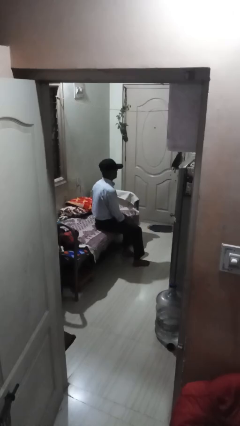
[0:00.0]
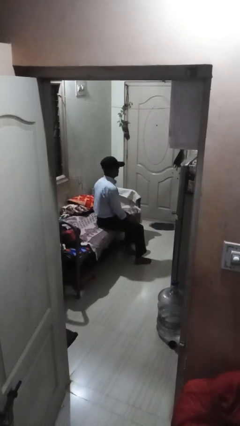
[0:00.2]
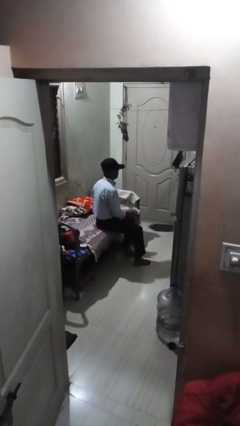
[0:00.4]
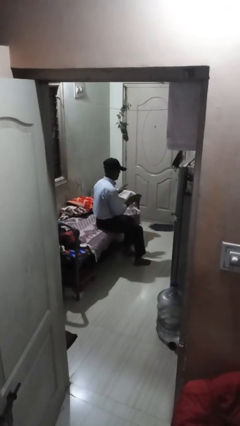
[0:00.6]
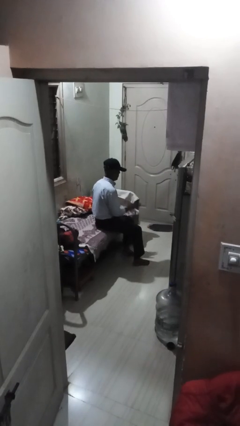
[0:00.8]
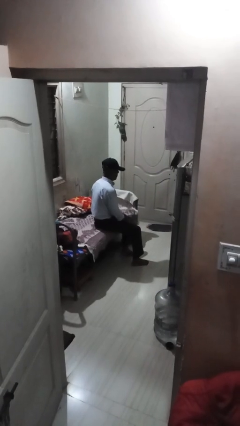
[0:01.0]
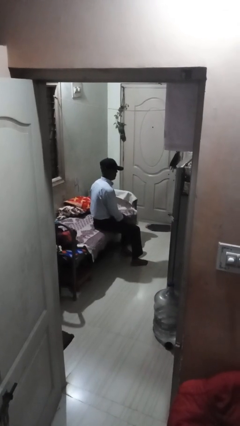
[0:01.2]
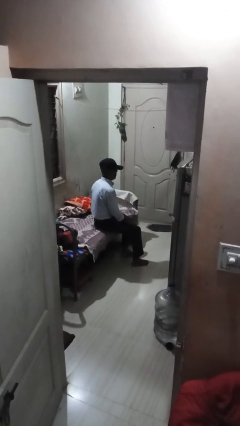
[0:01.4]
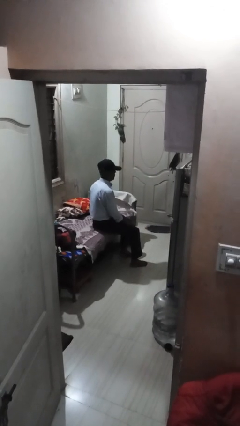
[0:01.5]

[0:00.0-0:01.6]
person slaps hands on thighs

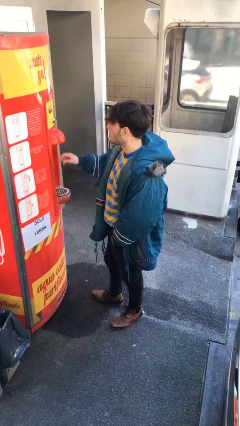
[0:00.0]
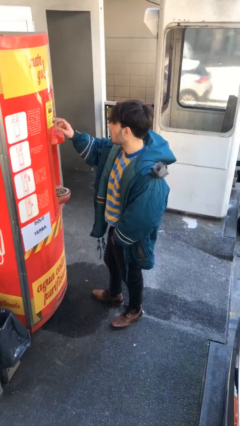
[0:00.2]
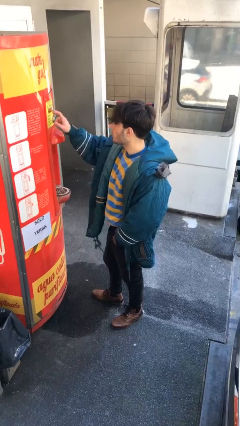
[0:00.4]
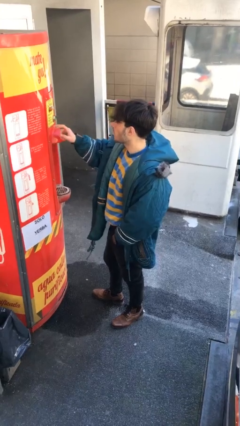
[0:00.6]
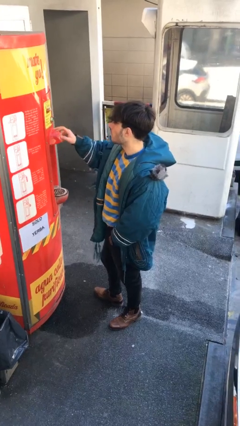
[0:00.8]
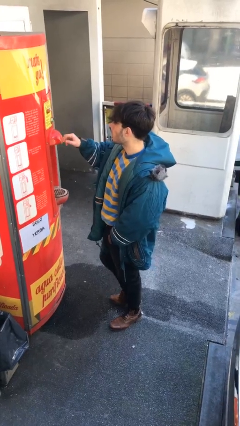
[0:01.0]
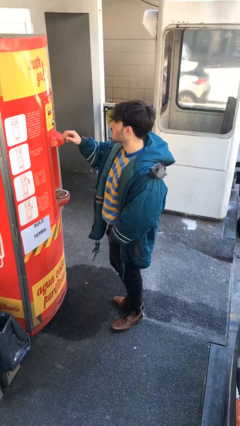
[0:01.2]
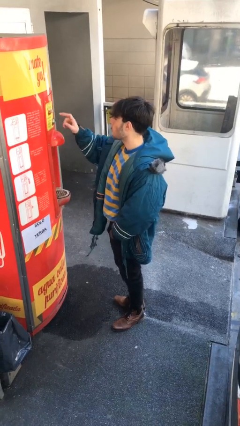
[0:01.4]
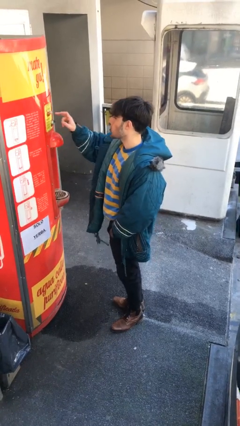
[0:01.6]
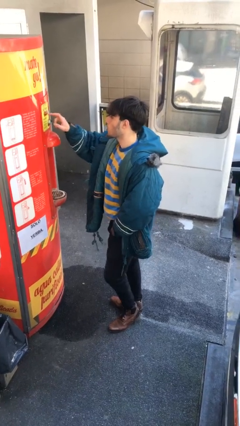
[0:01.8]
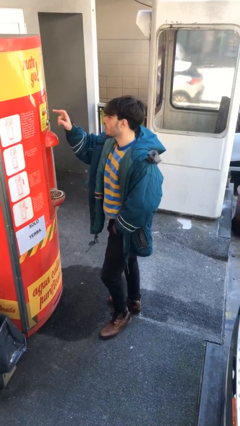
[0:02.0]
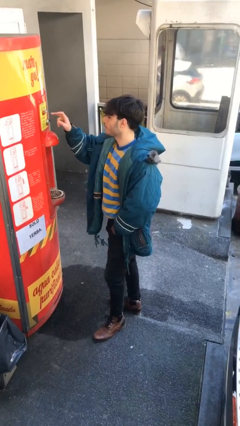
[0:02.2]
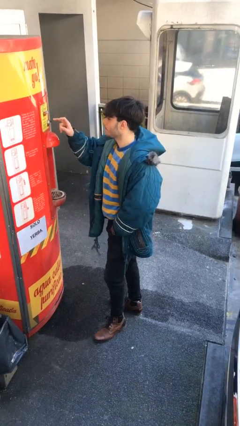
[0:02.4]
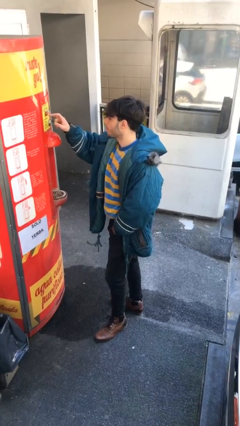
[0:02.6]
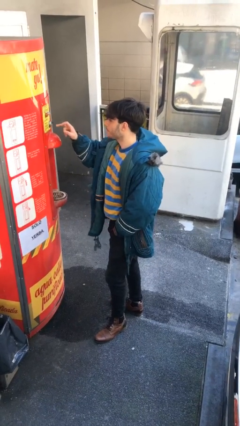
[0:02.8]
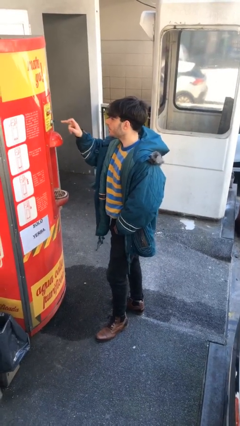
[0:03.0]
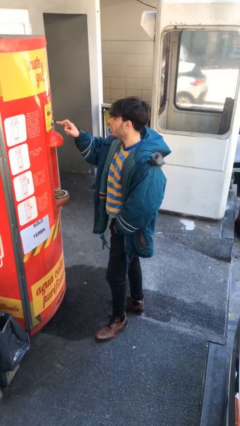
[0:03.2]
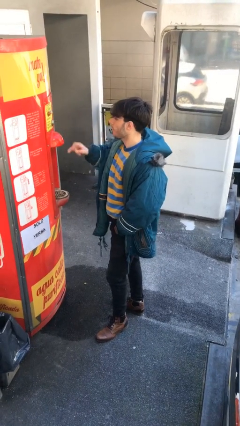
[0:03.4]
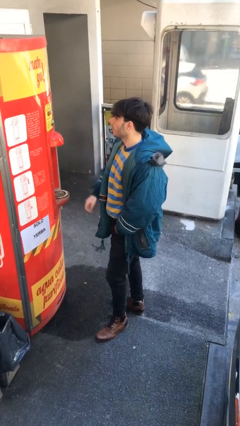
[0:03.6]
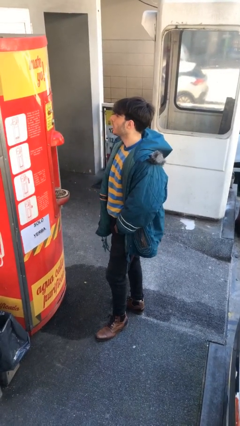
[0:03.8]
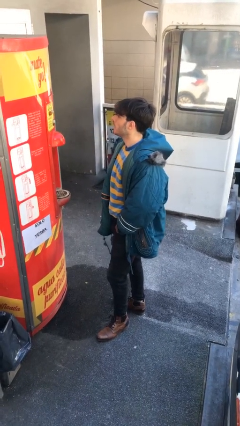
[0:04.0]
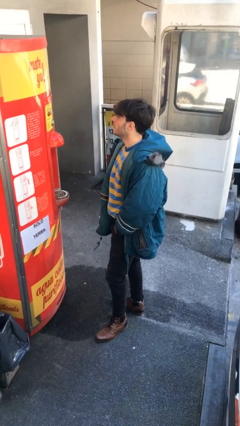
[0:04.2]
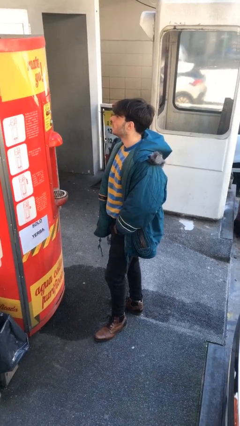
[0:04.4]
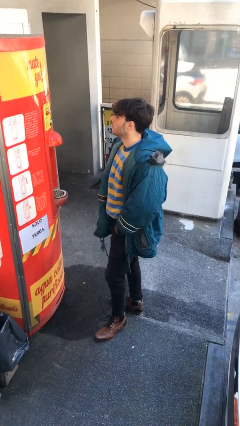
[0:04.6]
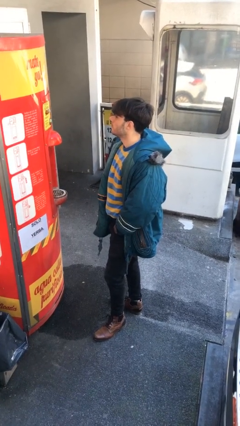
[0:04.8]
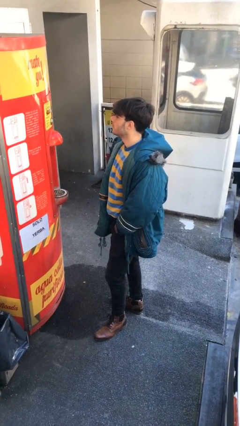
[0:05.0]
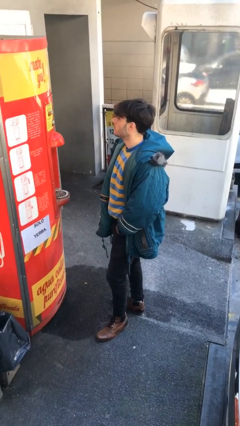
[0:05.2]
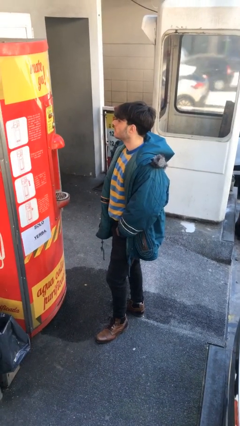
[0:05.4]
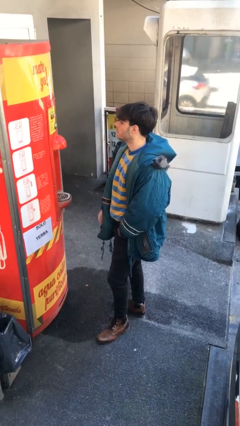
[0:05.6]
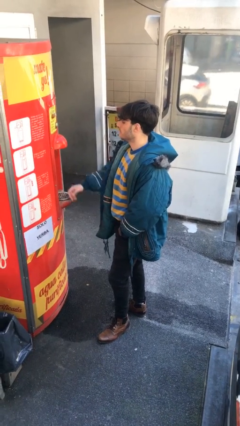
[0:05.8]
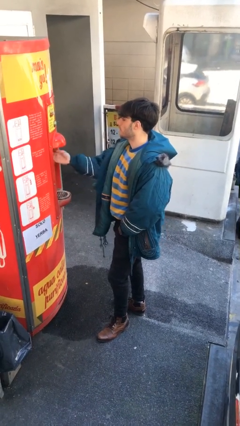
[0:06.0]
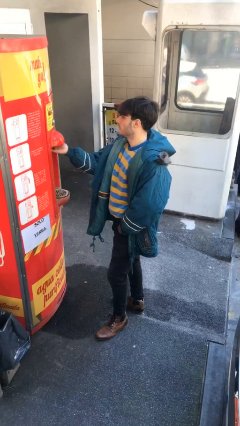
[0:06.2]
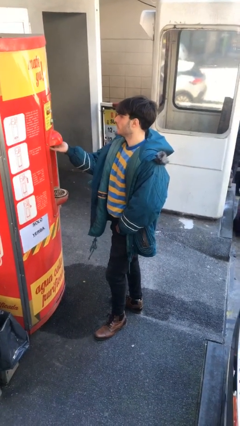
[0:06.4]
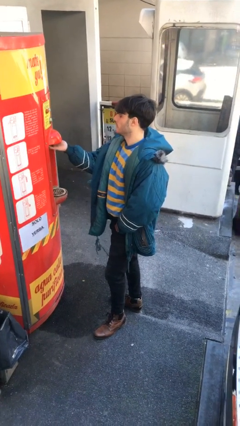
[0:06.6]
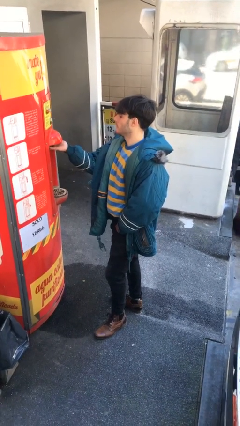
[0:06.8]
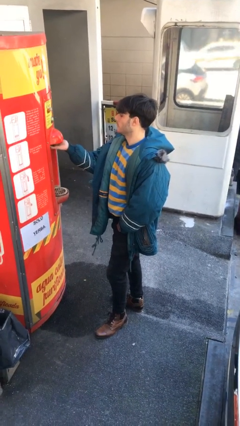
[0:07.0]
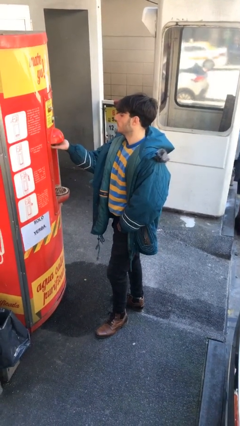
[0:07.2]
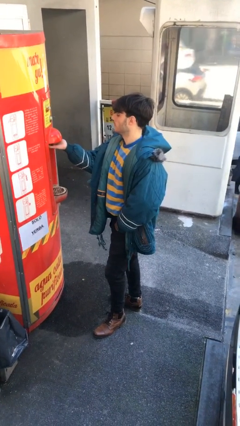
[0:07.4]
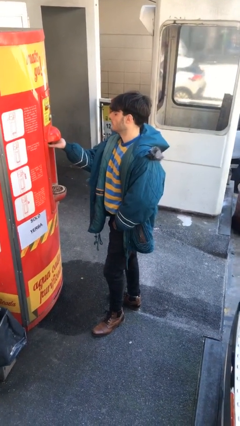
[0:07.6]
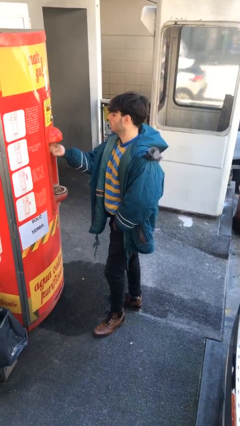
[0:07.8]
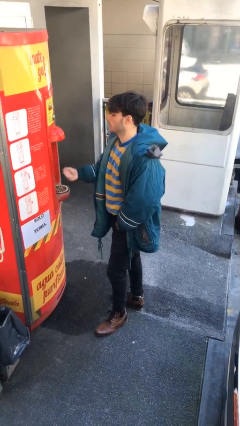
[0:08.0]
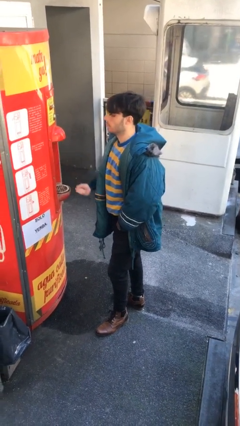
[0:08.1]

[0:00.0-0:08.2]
person purchases from machine

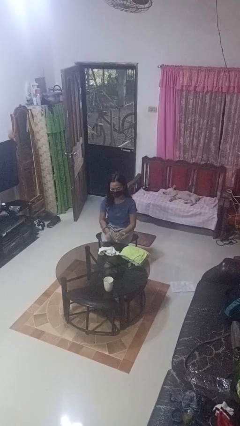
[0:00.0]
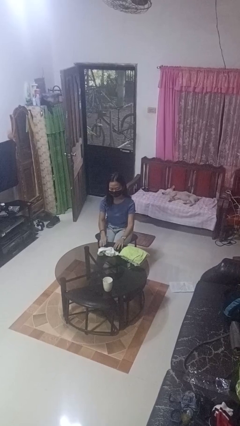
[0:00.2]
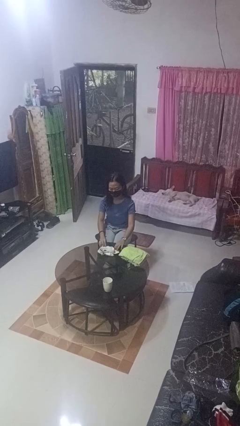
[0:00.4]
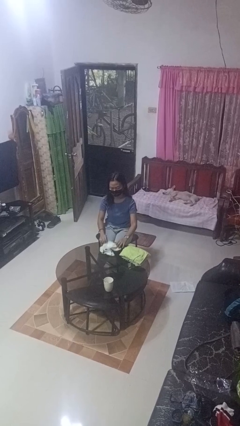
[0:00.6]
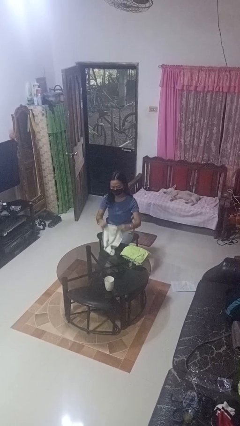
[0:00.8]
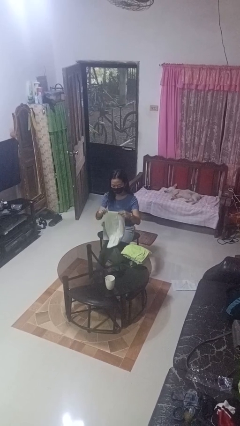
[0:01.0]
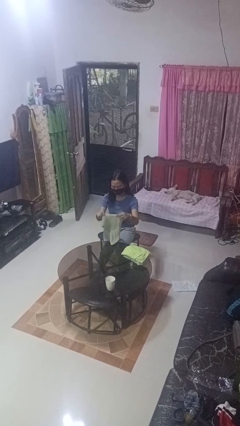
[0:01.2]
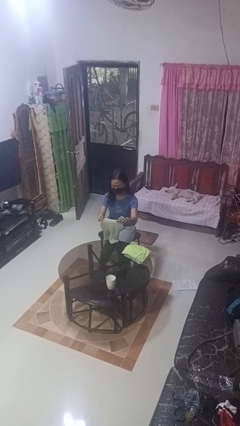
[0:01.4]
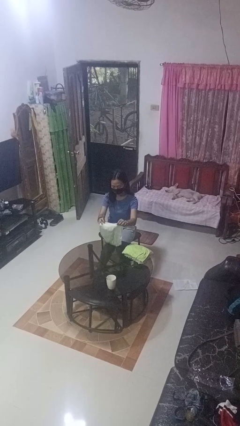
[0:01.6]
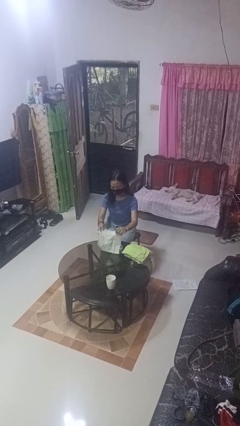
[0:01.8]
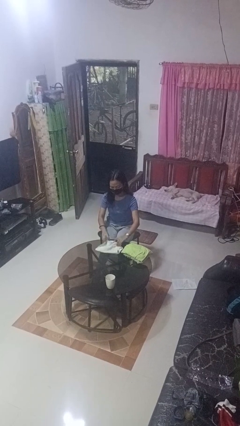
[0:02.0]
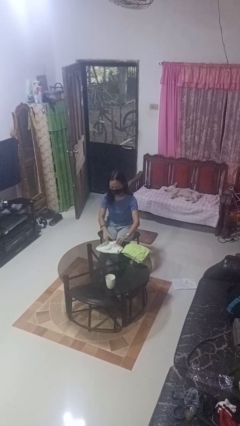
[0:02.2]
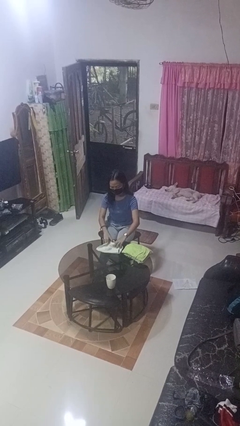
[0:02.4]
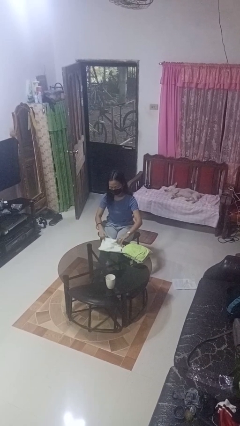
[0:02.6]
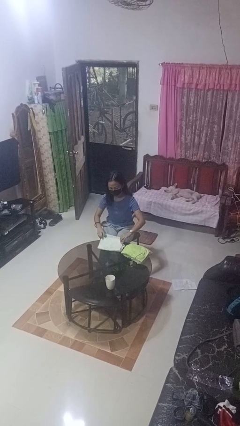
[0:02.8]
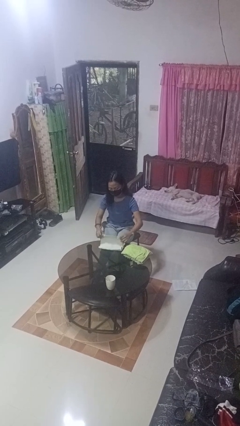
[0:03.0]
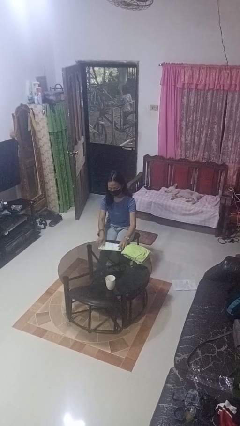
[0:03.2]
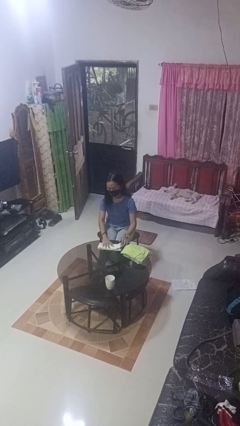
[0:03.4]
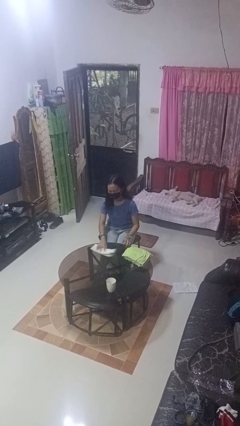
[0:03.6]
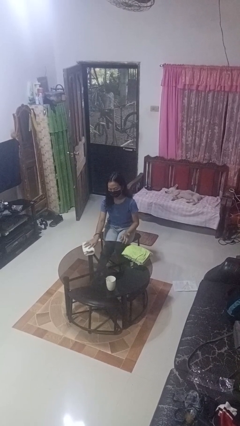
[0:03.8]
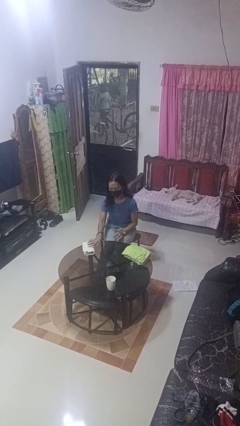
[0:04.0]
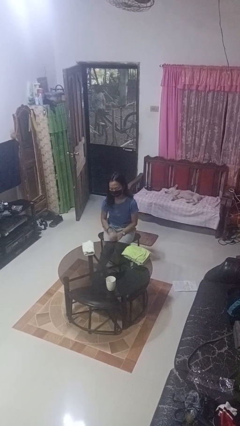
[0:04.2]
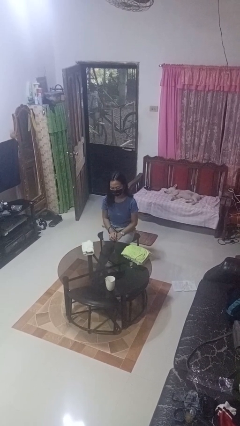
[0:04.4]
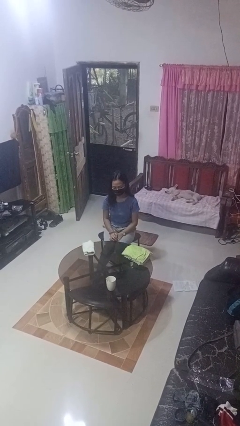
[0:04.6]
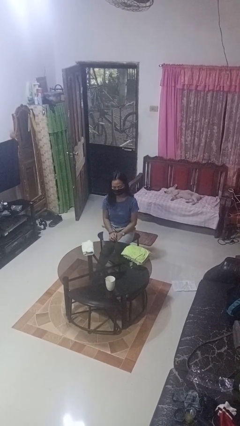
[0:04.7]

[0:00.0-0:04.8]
person folds towel

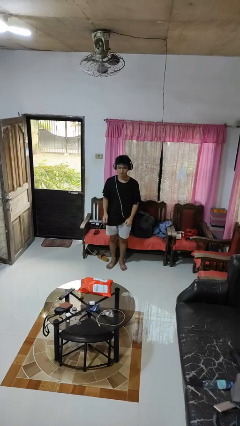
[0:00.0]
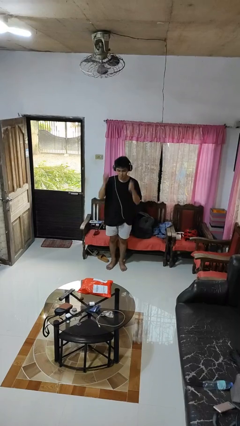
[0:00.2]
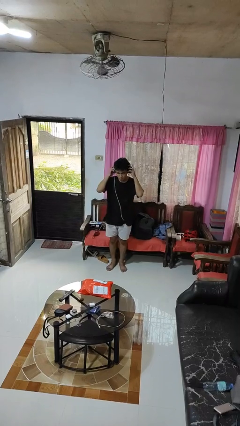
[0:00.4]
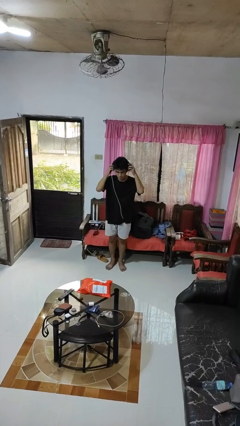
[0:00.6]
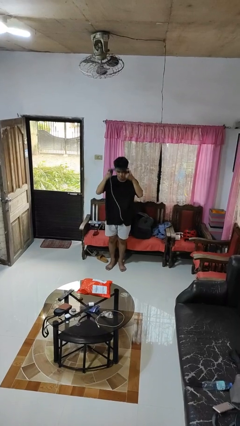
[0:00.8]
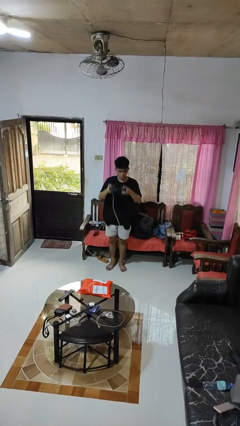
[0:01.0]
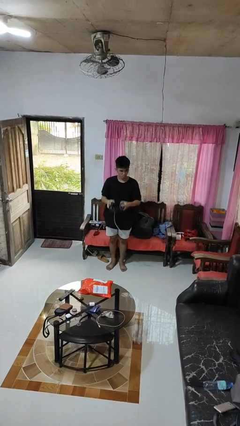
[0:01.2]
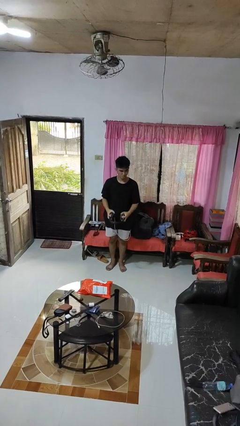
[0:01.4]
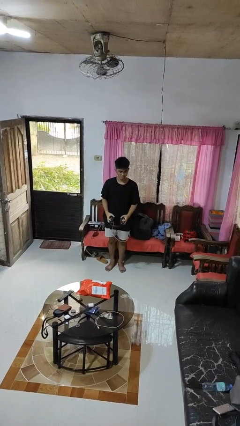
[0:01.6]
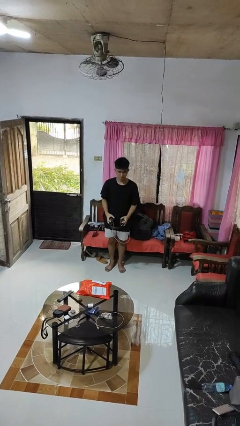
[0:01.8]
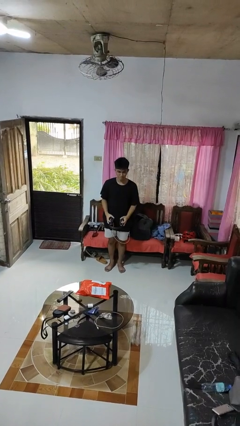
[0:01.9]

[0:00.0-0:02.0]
person takes off headphones

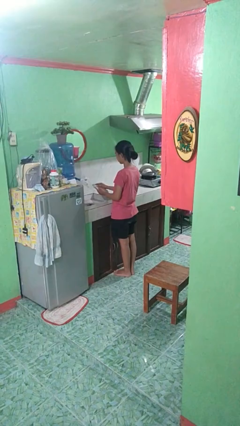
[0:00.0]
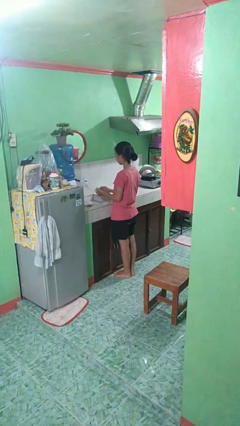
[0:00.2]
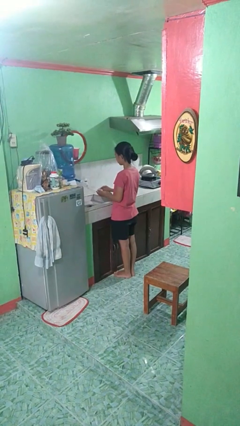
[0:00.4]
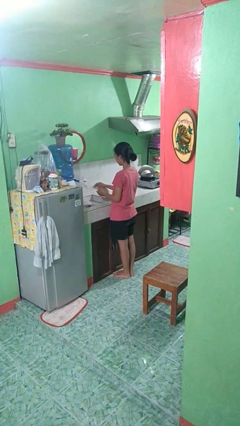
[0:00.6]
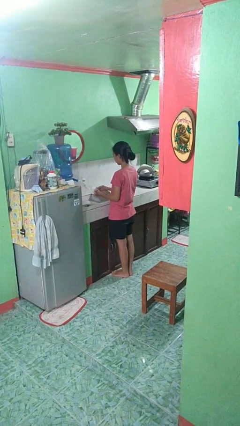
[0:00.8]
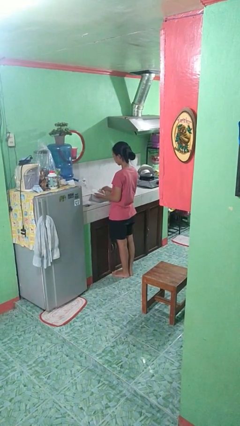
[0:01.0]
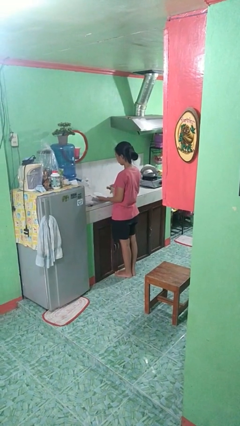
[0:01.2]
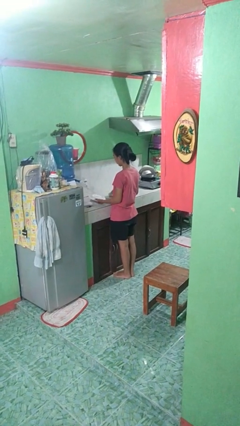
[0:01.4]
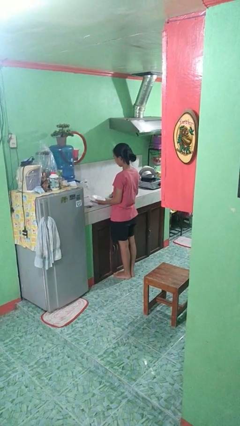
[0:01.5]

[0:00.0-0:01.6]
person dries dish
